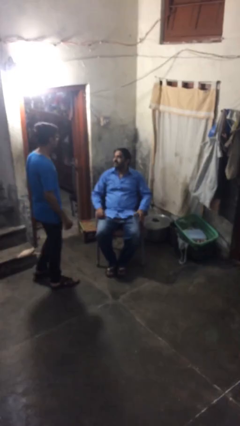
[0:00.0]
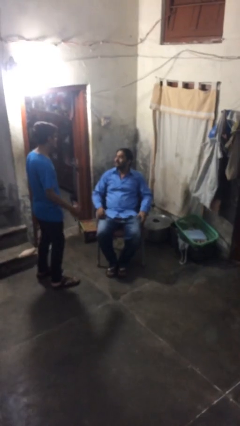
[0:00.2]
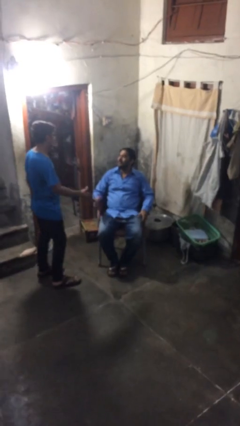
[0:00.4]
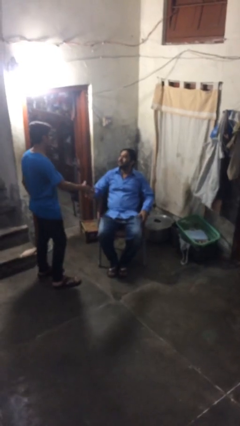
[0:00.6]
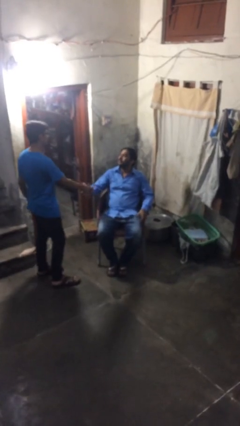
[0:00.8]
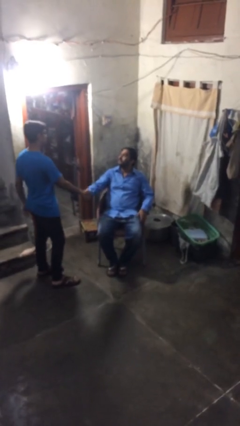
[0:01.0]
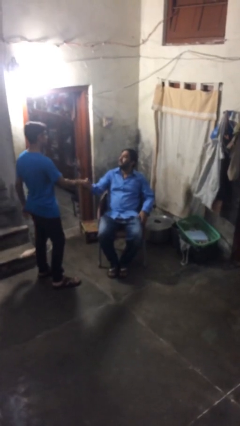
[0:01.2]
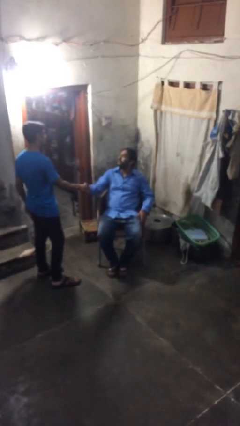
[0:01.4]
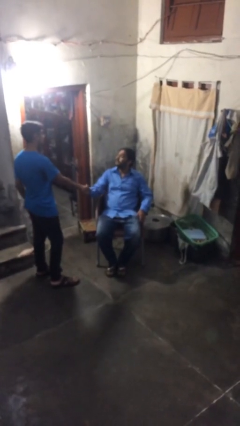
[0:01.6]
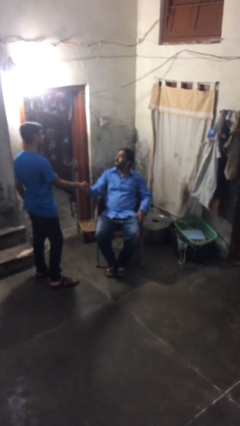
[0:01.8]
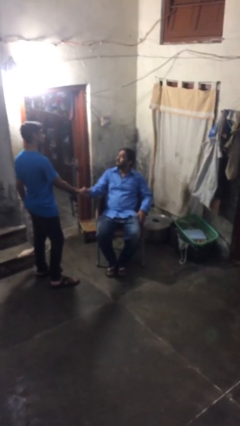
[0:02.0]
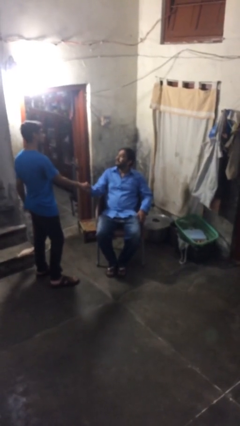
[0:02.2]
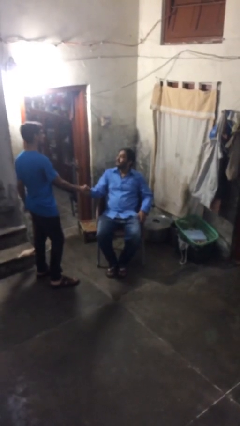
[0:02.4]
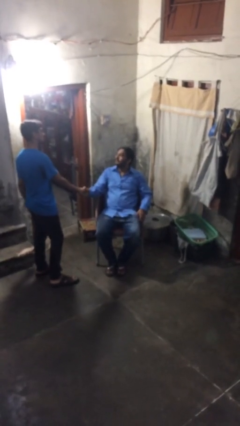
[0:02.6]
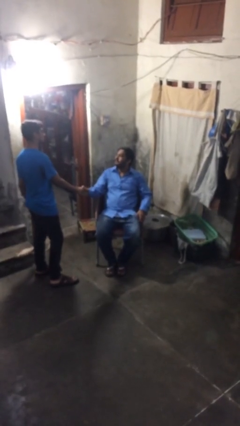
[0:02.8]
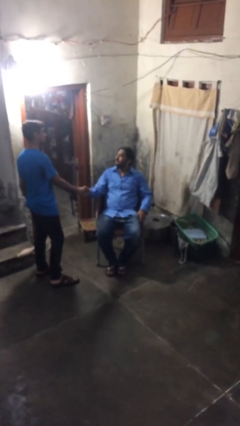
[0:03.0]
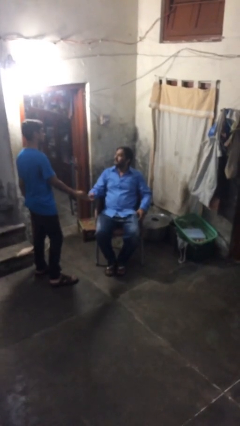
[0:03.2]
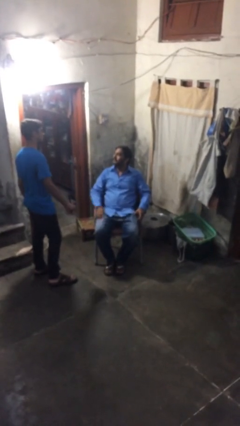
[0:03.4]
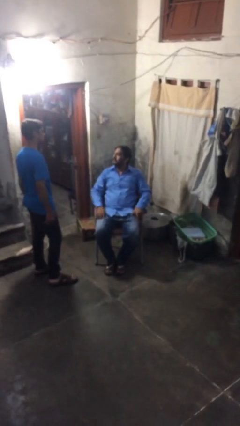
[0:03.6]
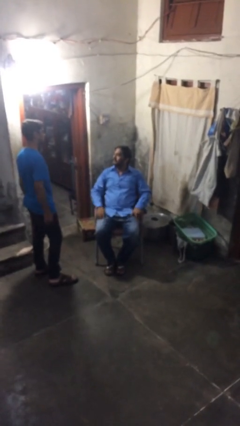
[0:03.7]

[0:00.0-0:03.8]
person shakes hand

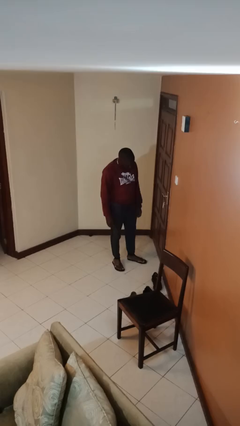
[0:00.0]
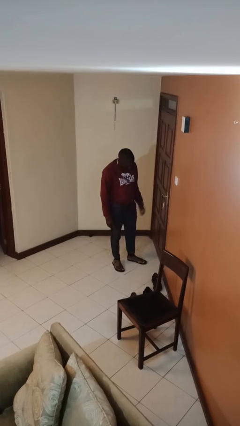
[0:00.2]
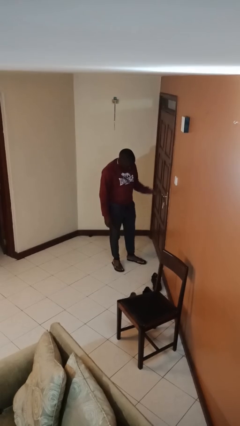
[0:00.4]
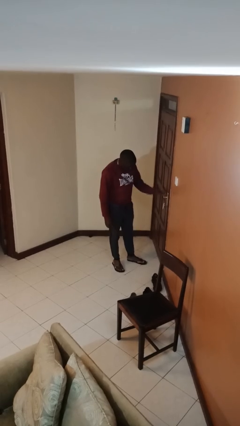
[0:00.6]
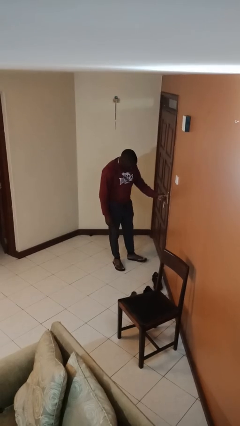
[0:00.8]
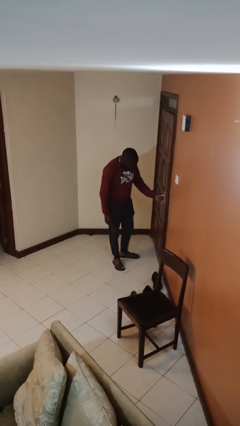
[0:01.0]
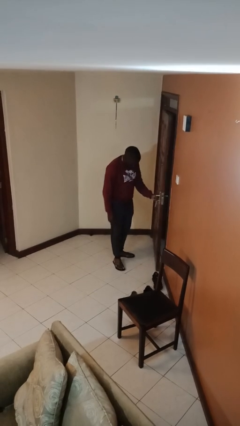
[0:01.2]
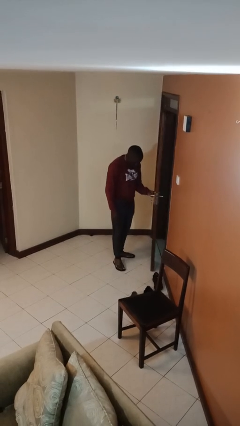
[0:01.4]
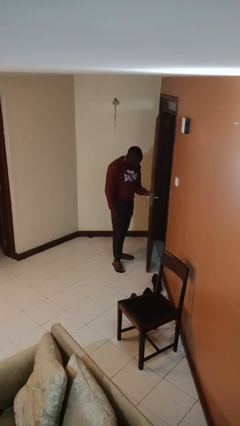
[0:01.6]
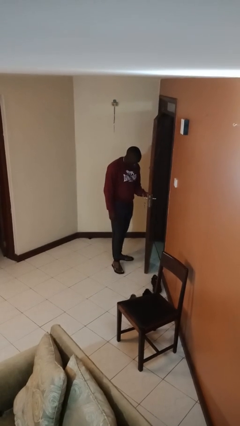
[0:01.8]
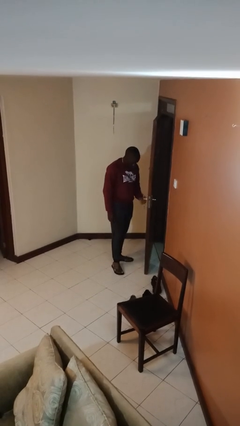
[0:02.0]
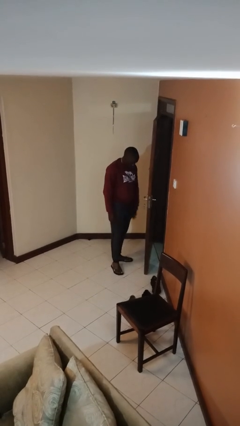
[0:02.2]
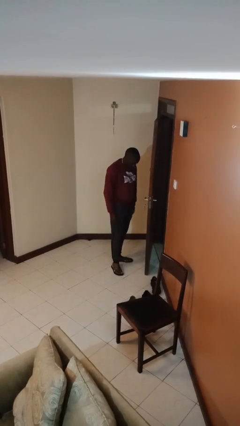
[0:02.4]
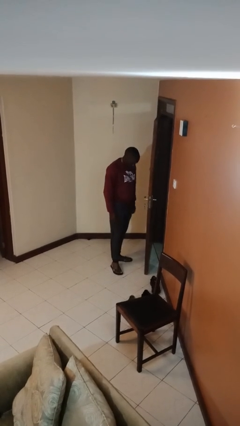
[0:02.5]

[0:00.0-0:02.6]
person opens facility door

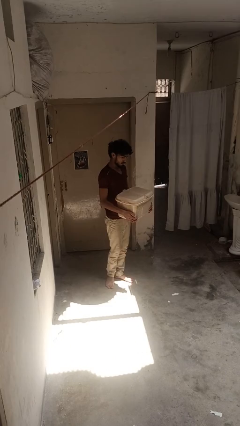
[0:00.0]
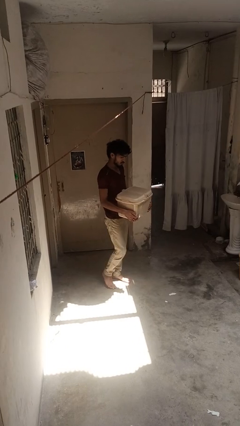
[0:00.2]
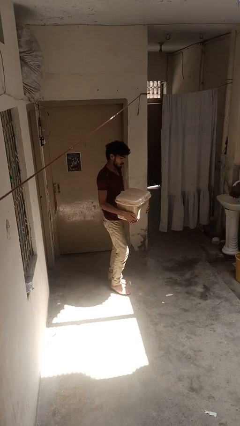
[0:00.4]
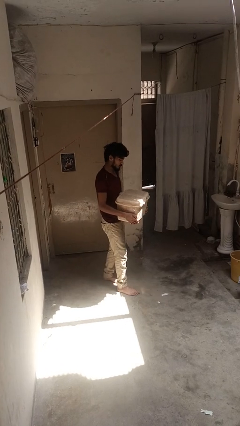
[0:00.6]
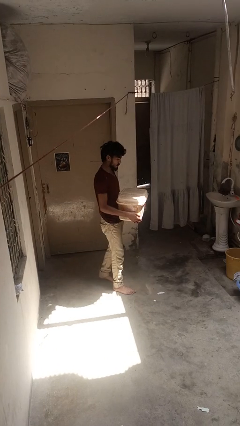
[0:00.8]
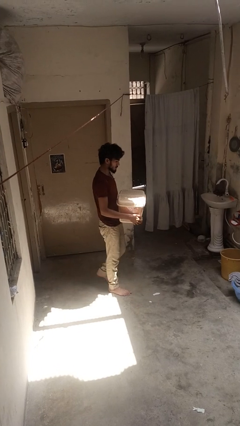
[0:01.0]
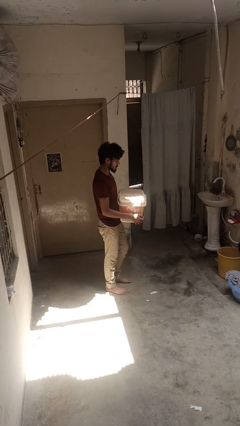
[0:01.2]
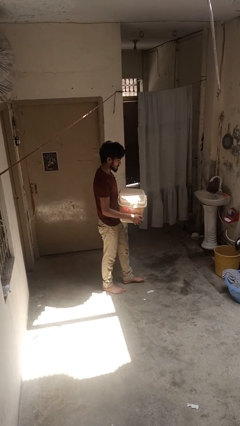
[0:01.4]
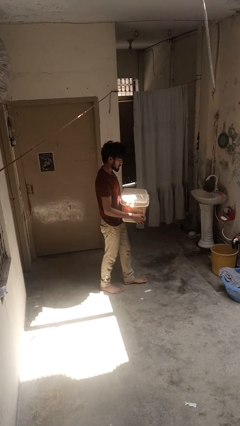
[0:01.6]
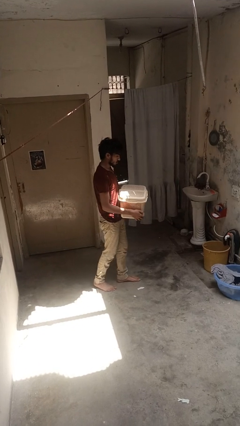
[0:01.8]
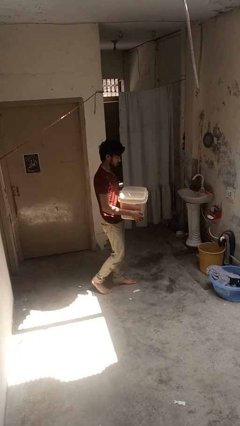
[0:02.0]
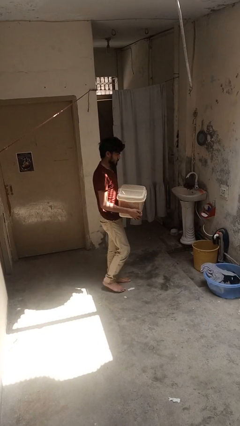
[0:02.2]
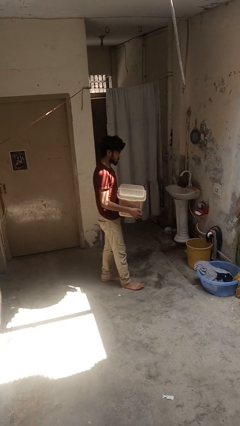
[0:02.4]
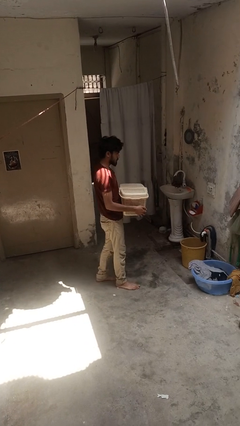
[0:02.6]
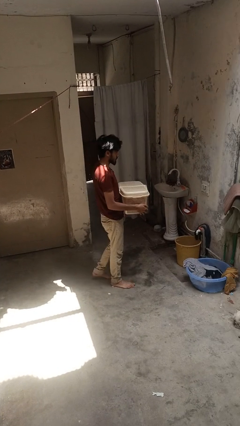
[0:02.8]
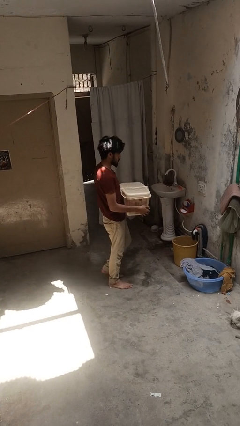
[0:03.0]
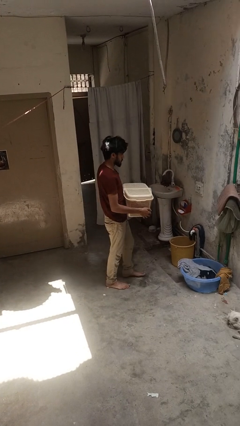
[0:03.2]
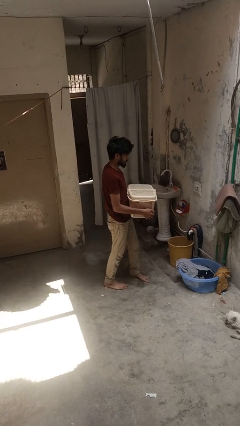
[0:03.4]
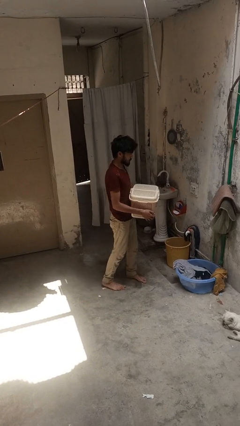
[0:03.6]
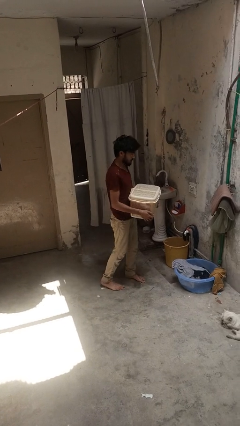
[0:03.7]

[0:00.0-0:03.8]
person carries laundry basket

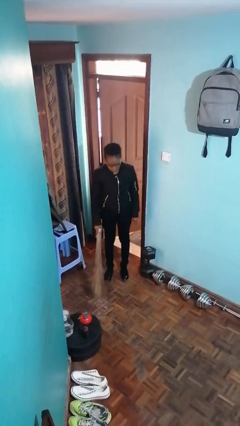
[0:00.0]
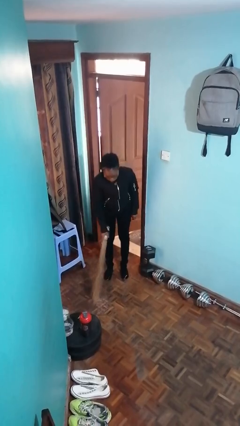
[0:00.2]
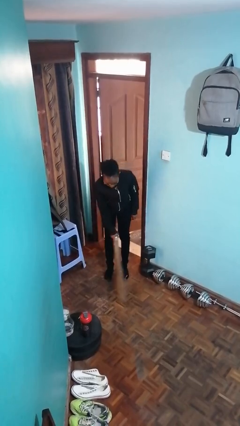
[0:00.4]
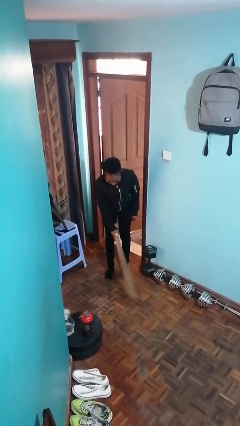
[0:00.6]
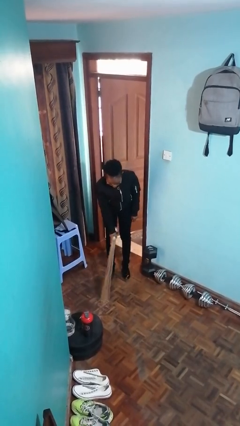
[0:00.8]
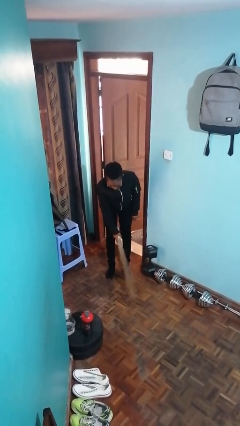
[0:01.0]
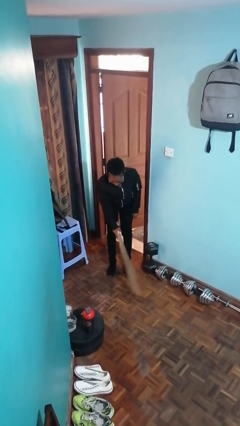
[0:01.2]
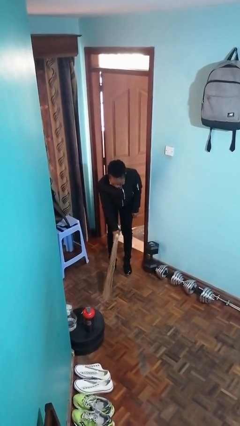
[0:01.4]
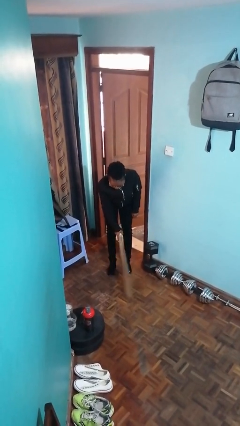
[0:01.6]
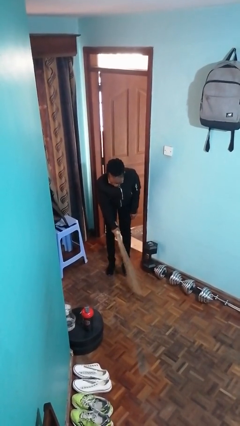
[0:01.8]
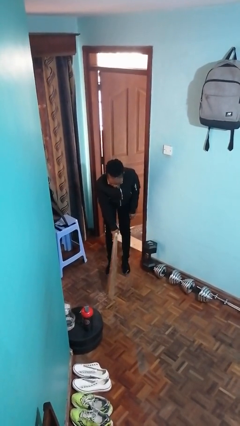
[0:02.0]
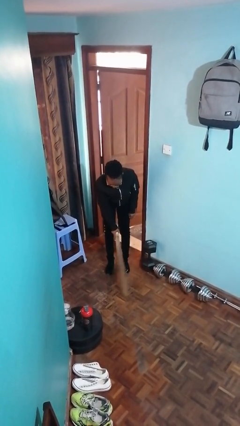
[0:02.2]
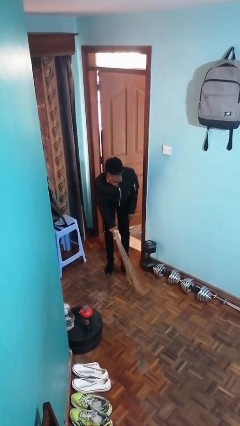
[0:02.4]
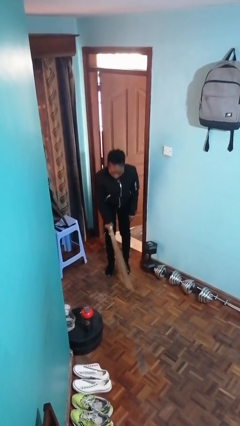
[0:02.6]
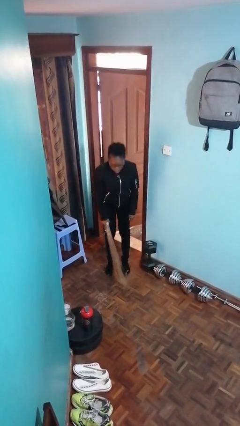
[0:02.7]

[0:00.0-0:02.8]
person sweeps floor

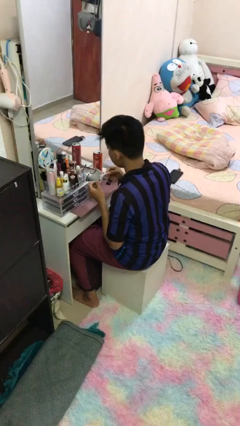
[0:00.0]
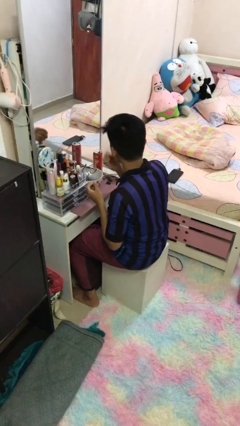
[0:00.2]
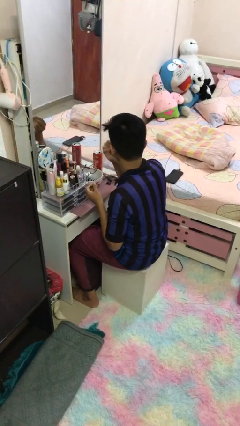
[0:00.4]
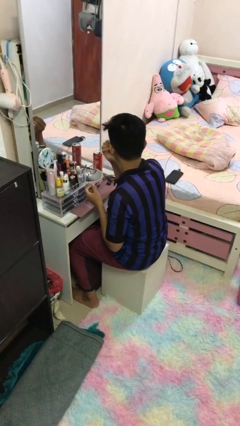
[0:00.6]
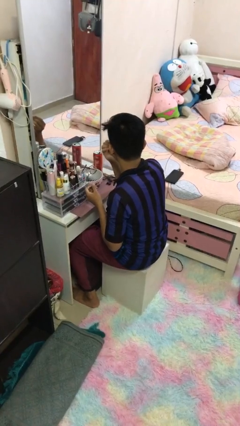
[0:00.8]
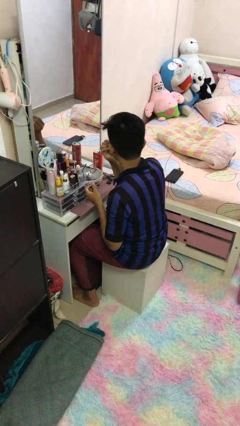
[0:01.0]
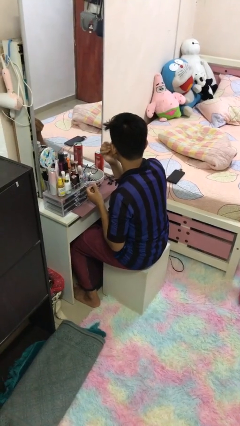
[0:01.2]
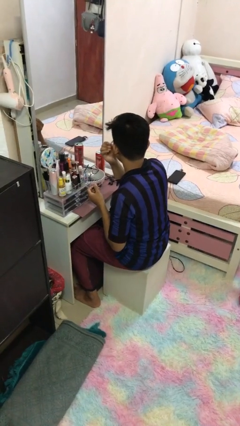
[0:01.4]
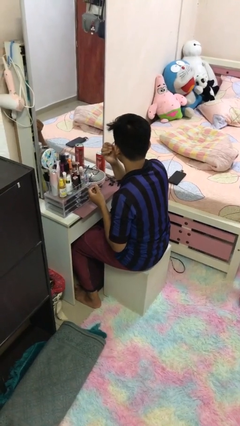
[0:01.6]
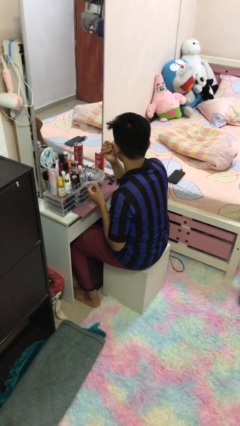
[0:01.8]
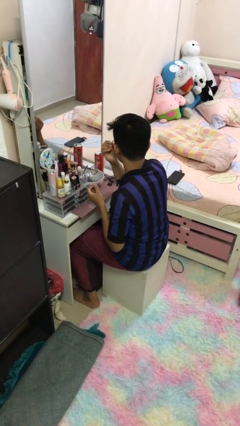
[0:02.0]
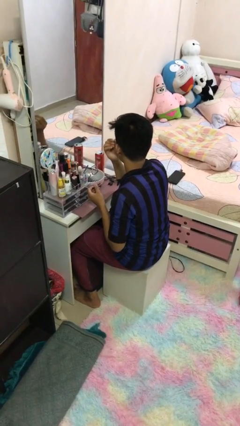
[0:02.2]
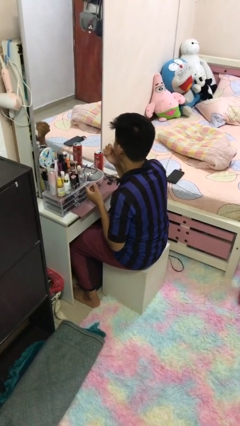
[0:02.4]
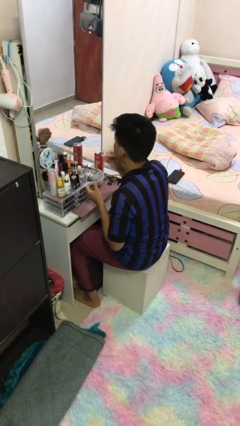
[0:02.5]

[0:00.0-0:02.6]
person applies eye makeup

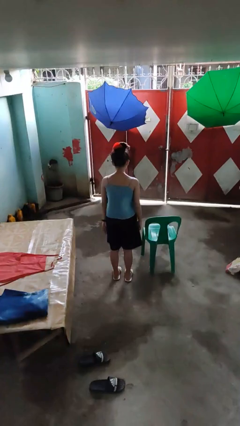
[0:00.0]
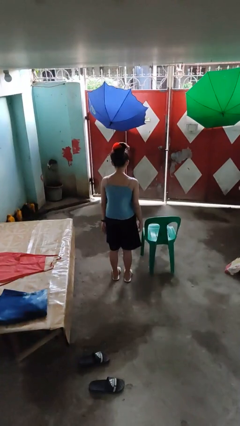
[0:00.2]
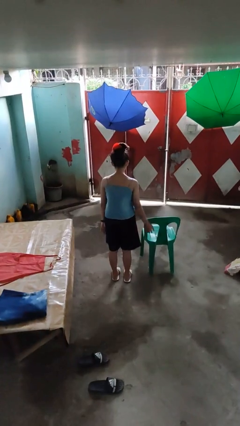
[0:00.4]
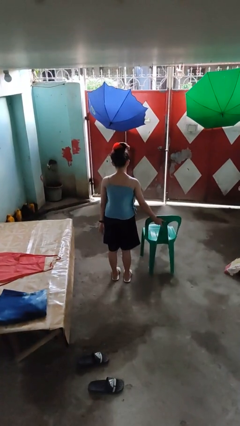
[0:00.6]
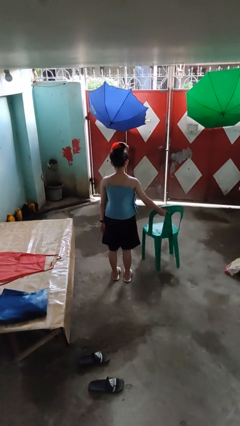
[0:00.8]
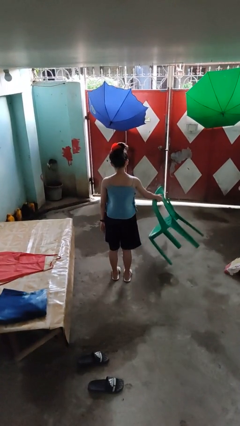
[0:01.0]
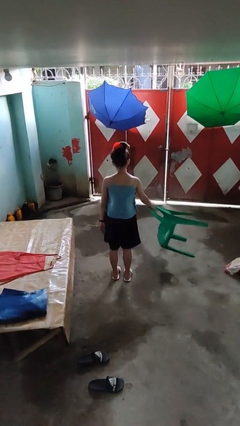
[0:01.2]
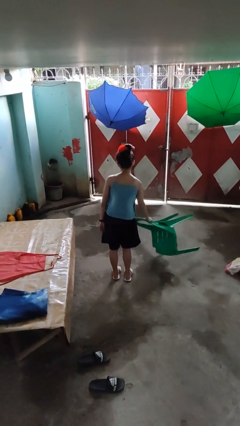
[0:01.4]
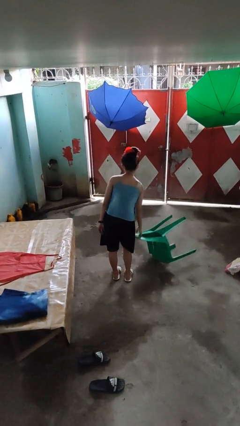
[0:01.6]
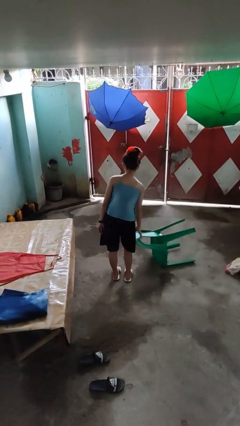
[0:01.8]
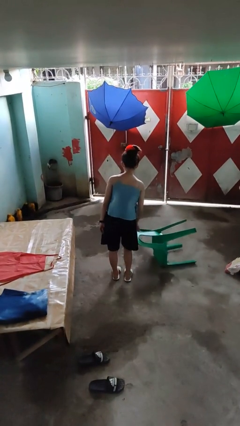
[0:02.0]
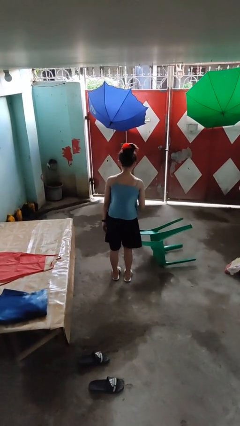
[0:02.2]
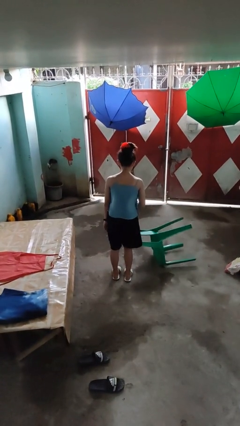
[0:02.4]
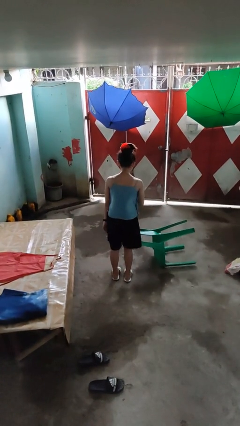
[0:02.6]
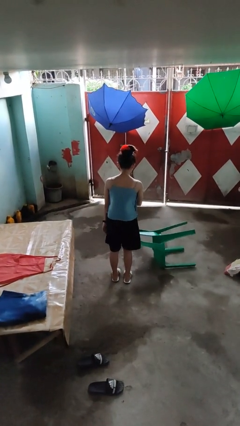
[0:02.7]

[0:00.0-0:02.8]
person knocks over furniture
